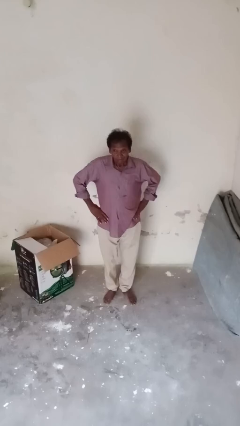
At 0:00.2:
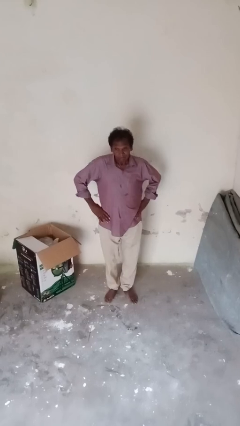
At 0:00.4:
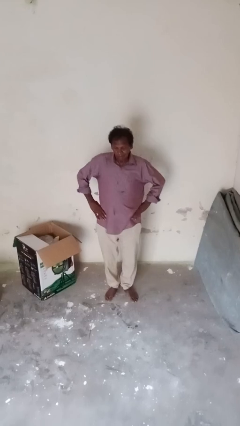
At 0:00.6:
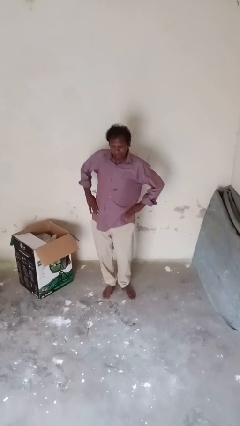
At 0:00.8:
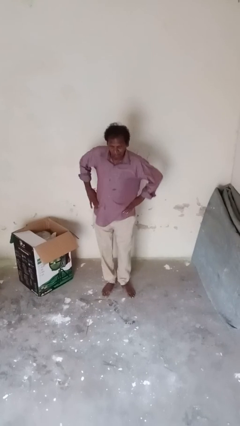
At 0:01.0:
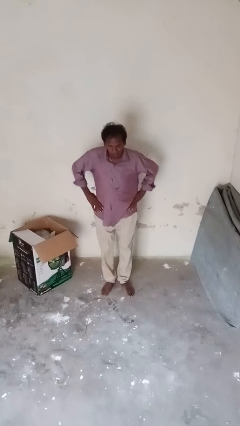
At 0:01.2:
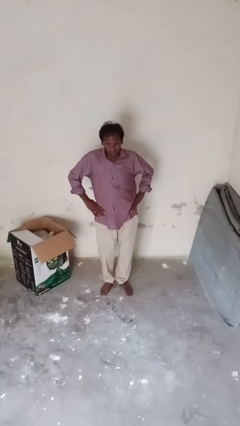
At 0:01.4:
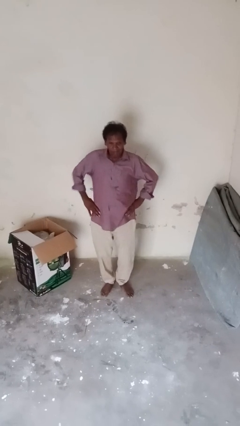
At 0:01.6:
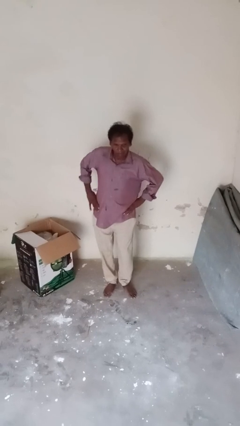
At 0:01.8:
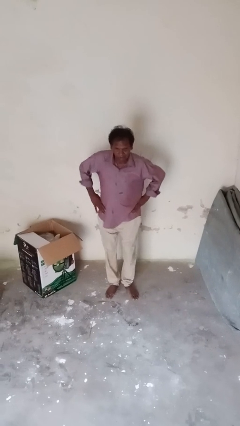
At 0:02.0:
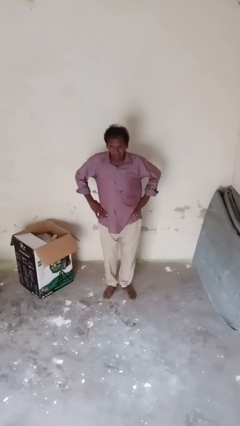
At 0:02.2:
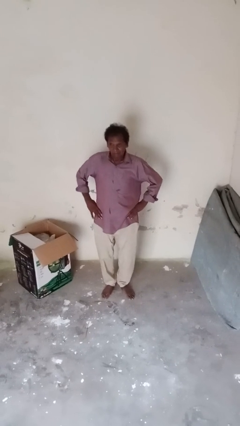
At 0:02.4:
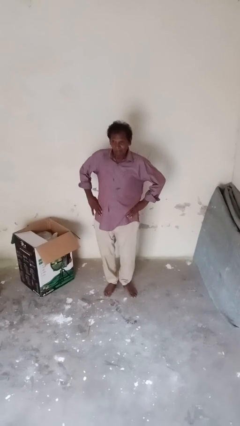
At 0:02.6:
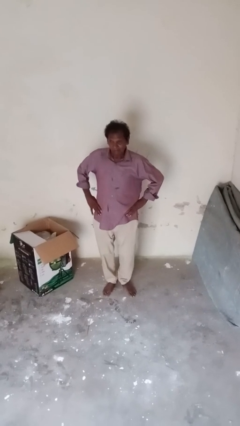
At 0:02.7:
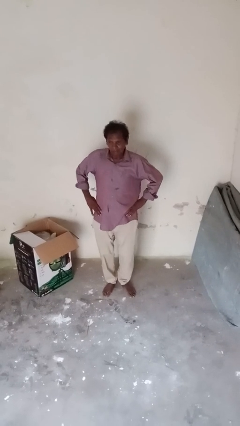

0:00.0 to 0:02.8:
person wiggles hips

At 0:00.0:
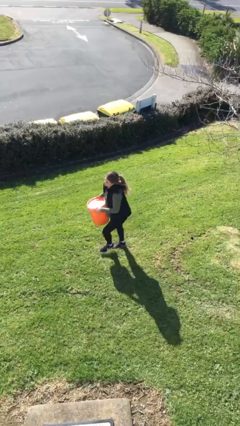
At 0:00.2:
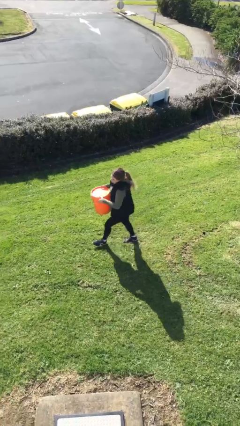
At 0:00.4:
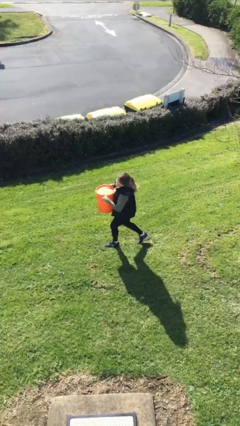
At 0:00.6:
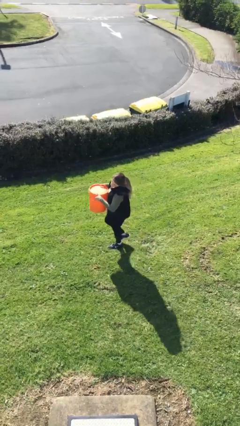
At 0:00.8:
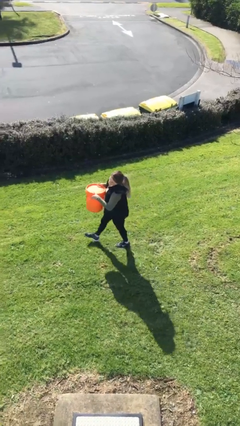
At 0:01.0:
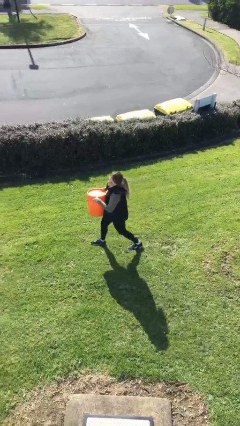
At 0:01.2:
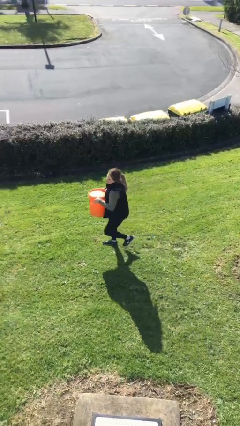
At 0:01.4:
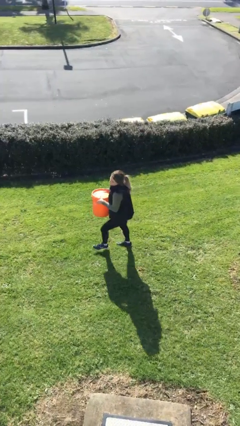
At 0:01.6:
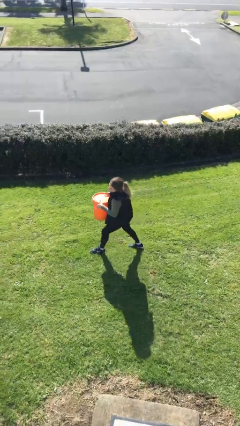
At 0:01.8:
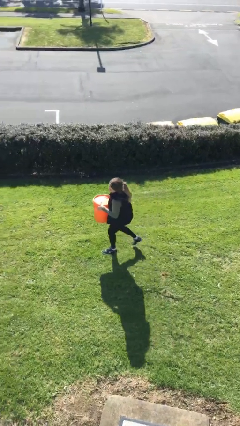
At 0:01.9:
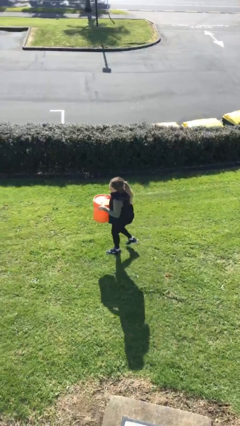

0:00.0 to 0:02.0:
person carries heavy object

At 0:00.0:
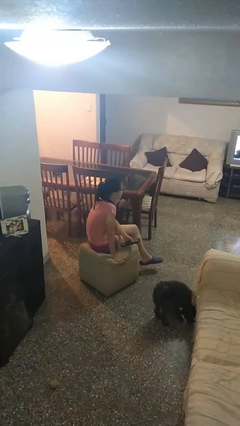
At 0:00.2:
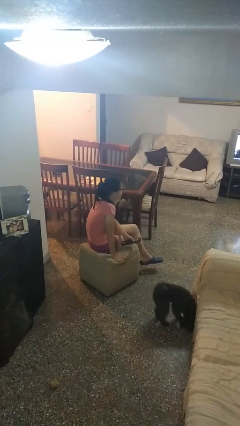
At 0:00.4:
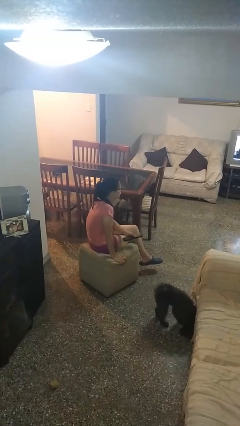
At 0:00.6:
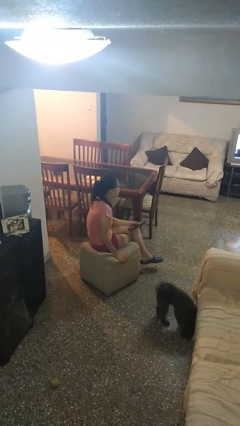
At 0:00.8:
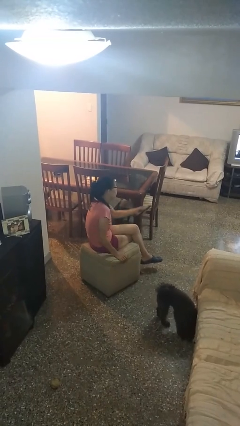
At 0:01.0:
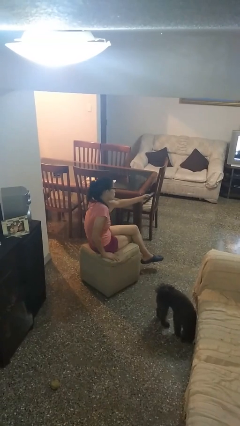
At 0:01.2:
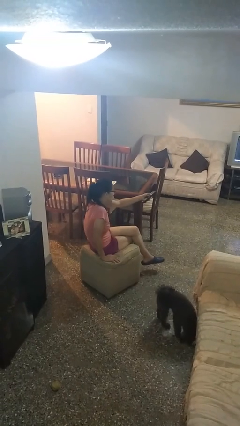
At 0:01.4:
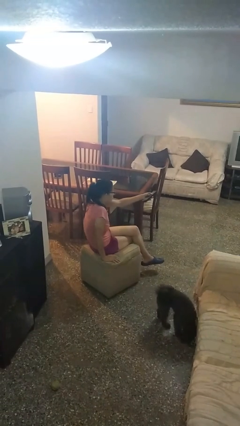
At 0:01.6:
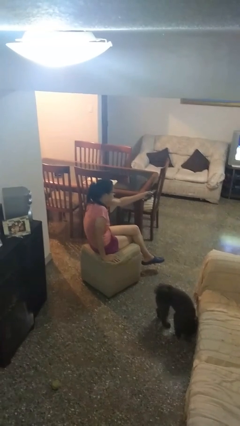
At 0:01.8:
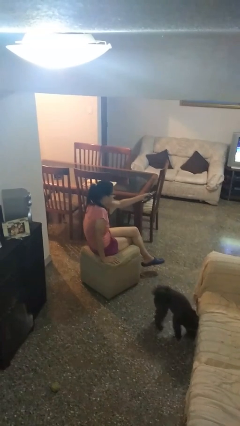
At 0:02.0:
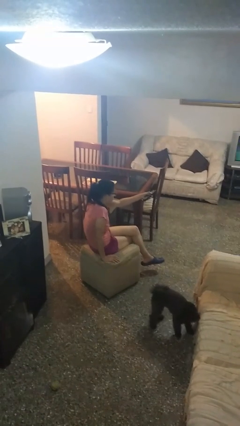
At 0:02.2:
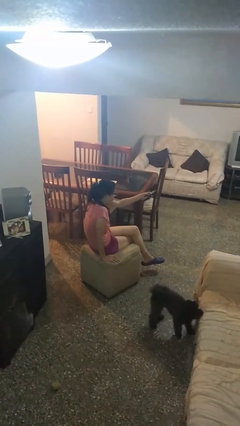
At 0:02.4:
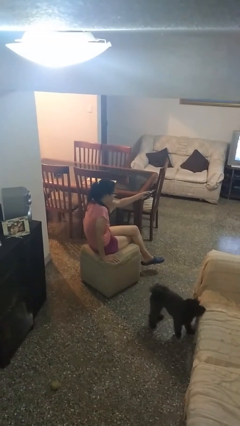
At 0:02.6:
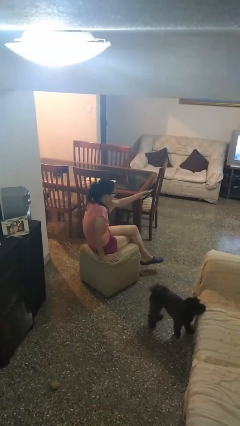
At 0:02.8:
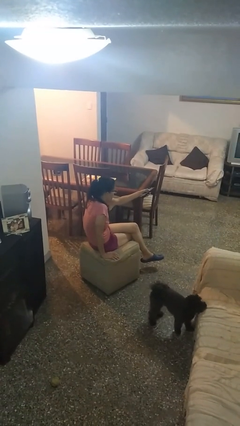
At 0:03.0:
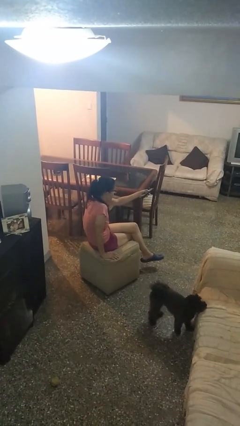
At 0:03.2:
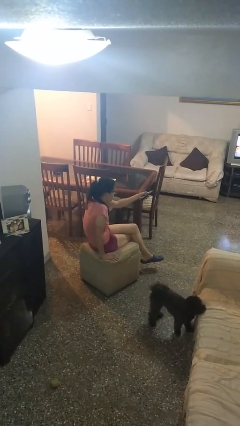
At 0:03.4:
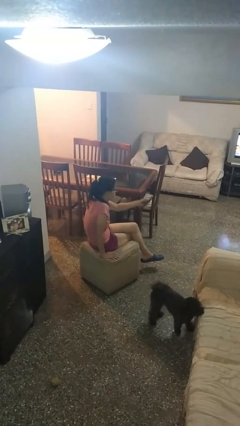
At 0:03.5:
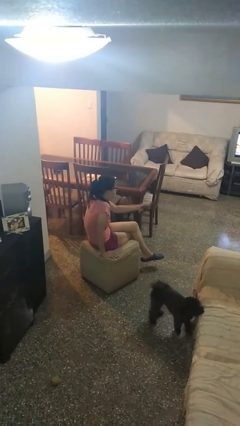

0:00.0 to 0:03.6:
person uses television remote

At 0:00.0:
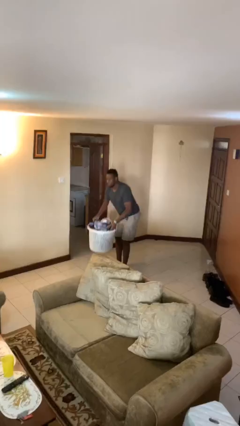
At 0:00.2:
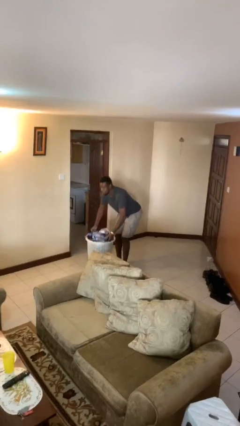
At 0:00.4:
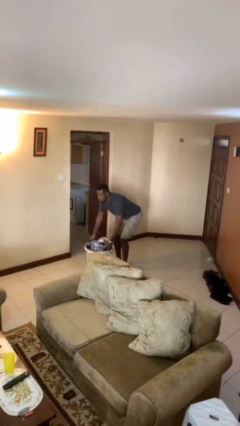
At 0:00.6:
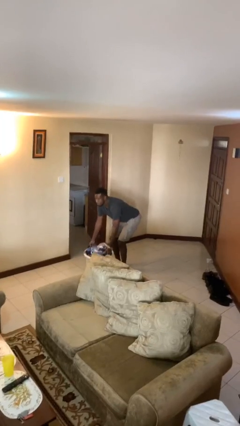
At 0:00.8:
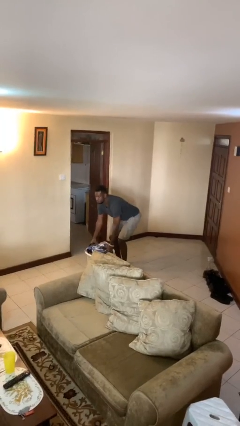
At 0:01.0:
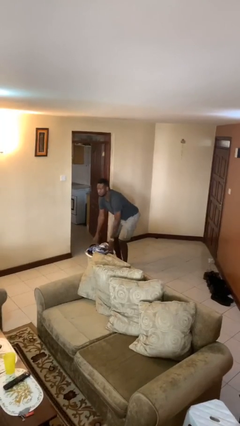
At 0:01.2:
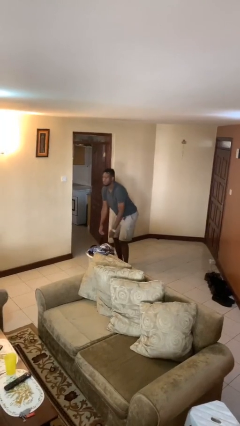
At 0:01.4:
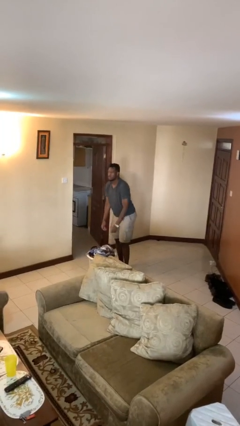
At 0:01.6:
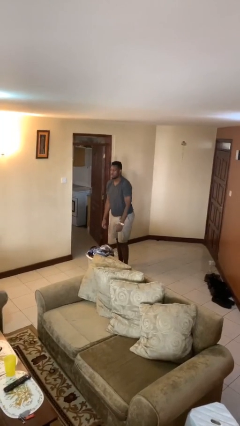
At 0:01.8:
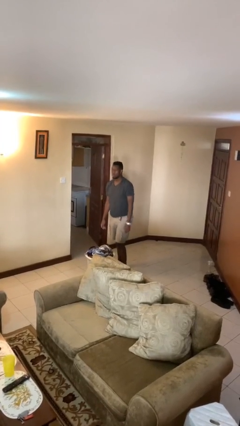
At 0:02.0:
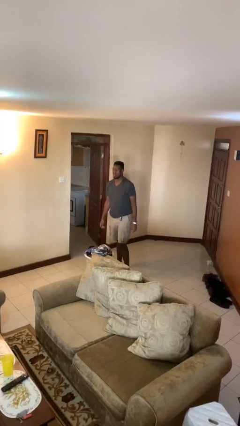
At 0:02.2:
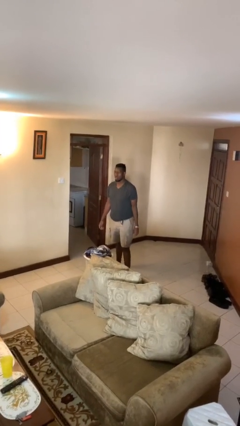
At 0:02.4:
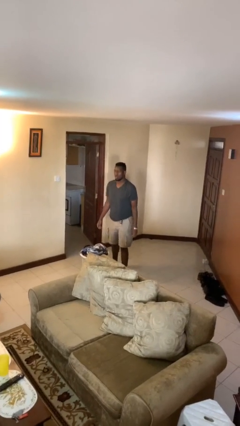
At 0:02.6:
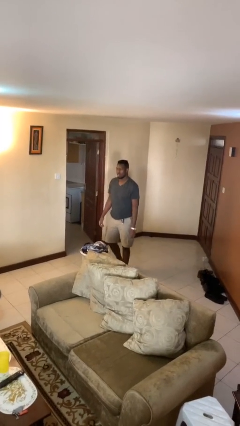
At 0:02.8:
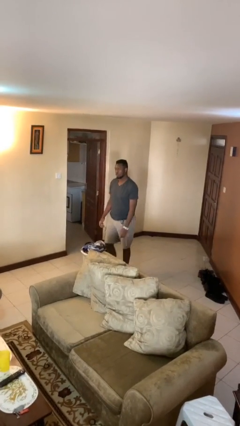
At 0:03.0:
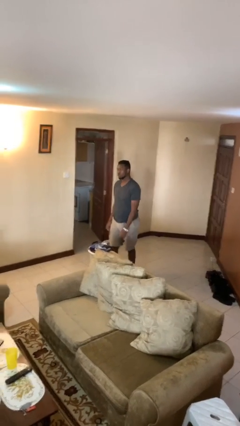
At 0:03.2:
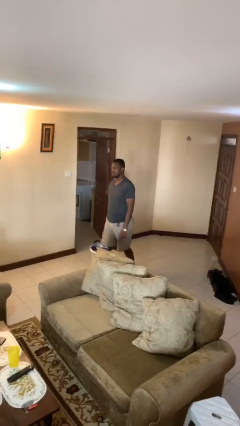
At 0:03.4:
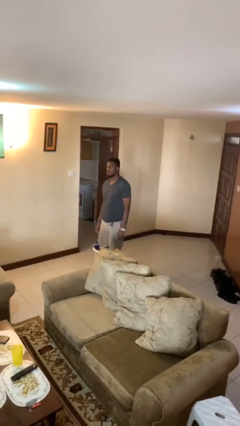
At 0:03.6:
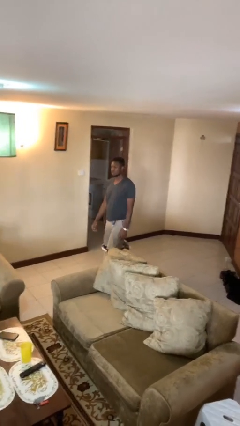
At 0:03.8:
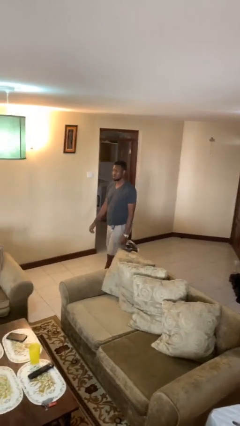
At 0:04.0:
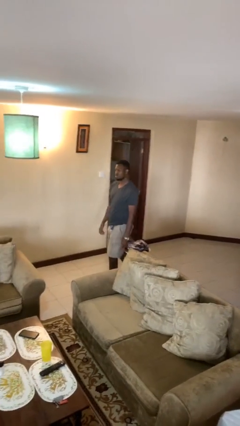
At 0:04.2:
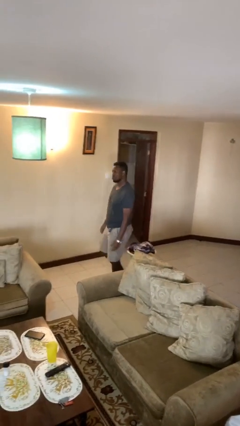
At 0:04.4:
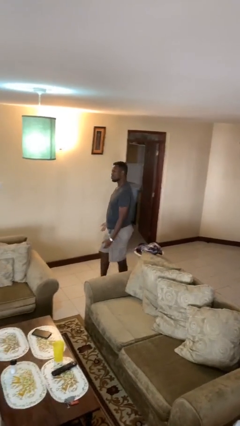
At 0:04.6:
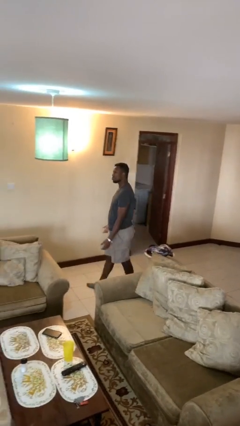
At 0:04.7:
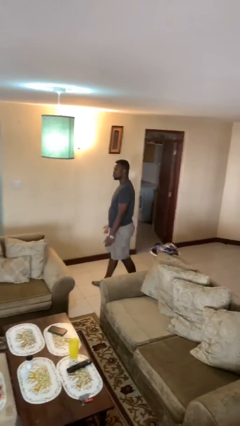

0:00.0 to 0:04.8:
person puts down object on floor

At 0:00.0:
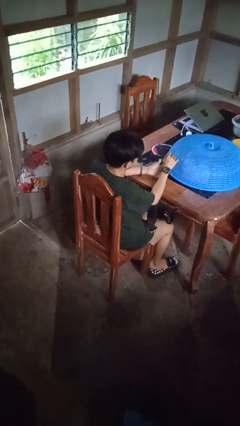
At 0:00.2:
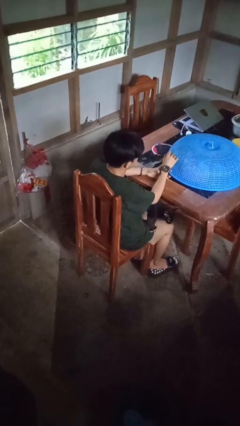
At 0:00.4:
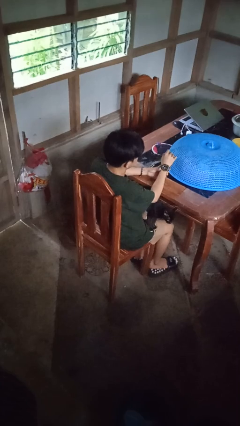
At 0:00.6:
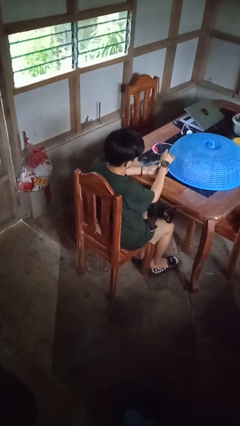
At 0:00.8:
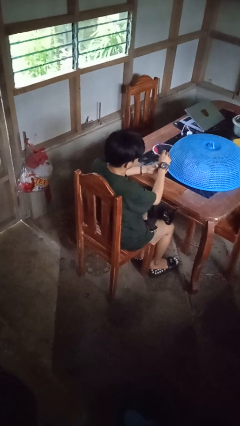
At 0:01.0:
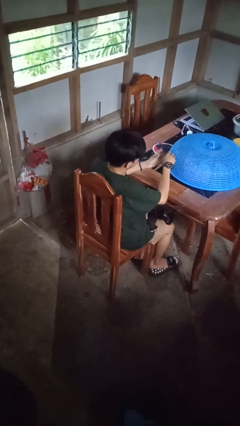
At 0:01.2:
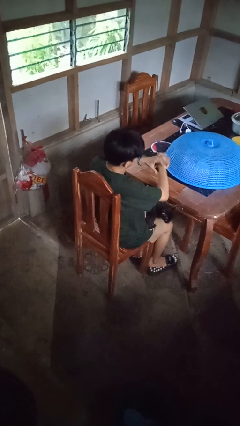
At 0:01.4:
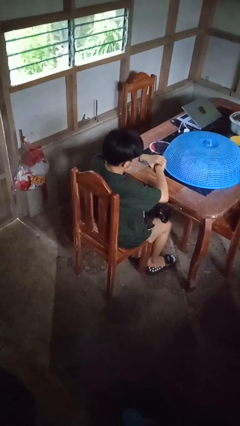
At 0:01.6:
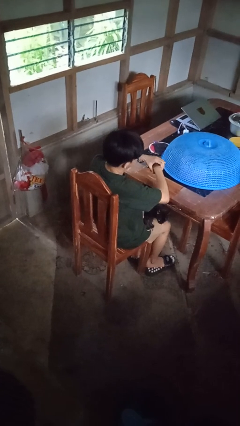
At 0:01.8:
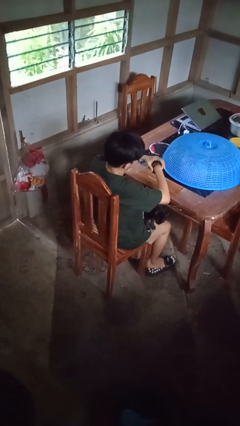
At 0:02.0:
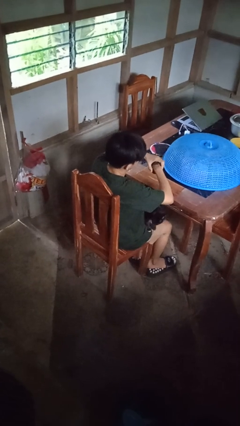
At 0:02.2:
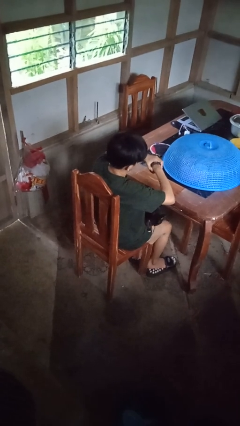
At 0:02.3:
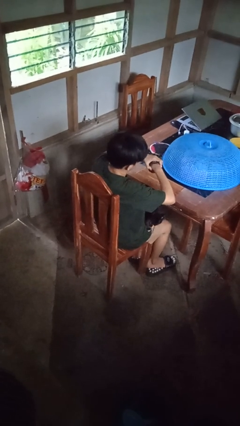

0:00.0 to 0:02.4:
person takes off wristwatch

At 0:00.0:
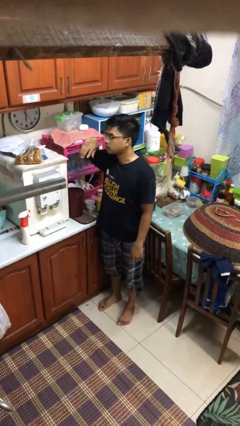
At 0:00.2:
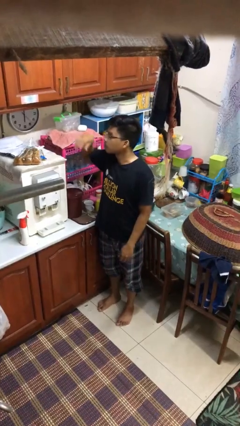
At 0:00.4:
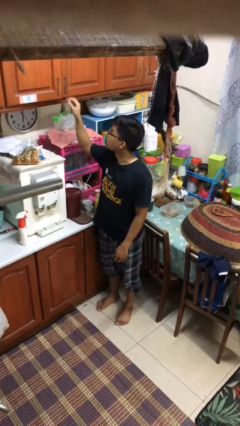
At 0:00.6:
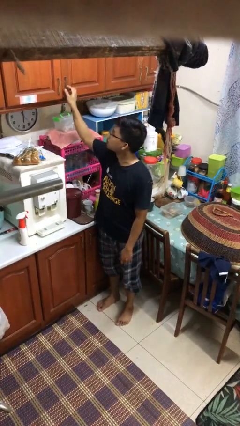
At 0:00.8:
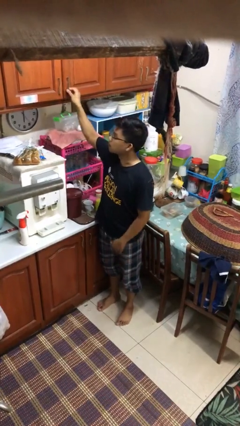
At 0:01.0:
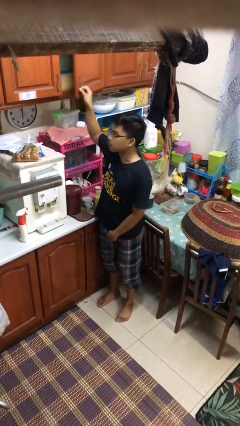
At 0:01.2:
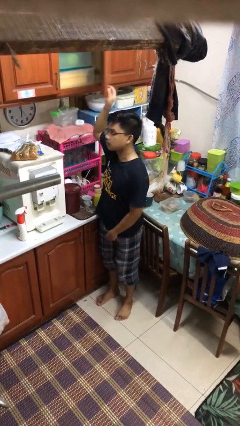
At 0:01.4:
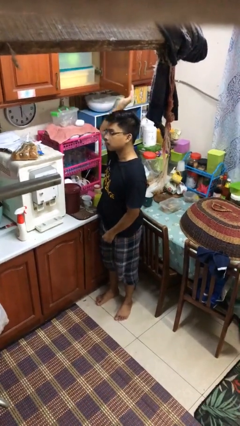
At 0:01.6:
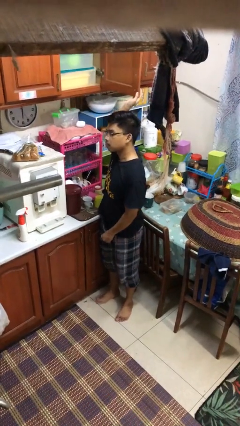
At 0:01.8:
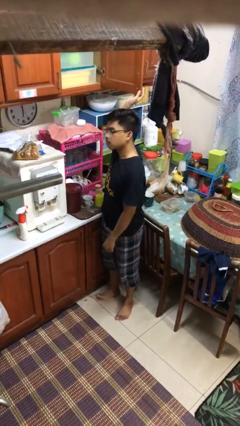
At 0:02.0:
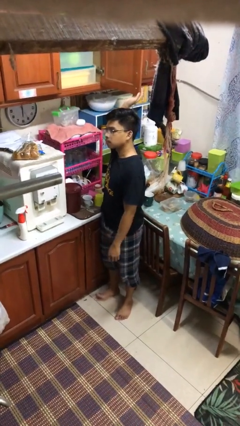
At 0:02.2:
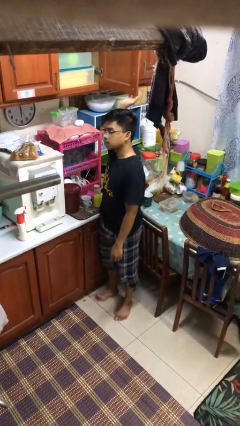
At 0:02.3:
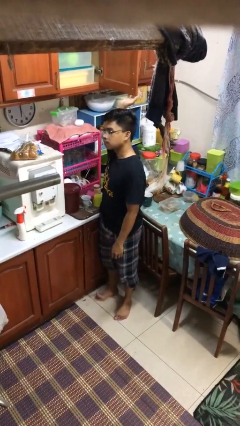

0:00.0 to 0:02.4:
person opens kitchen drawer
